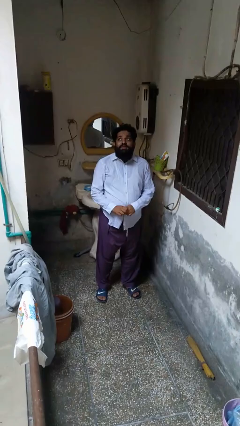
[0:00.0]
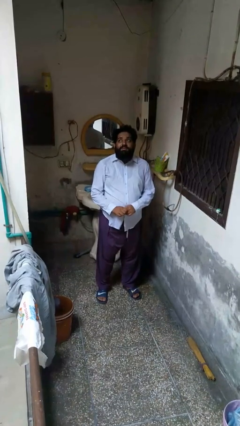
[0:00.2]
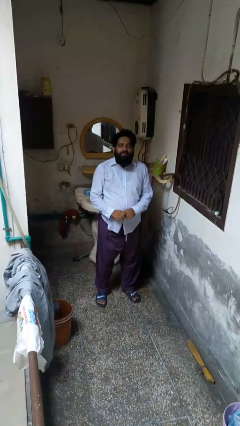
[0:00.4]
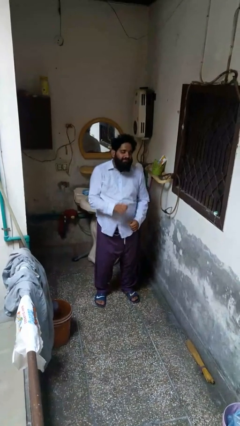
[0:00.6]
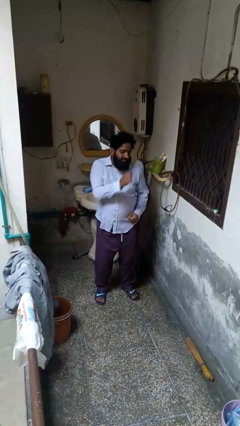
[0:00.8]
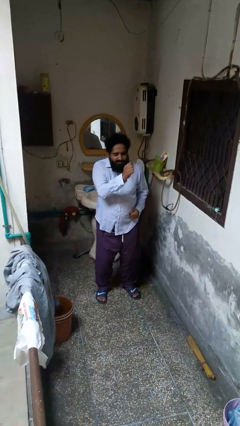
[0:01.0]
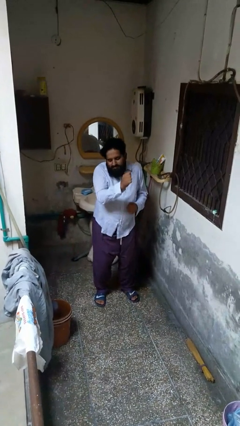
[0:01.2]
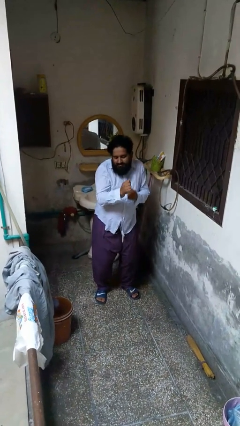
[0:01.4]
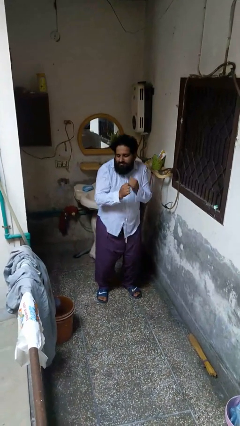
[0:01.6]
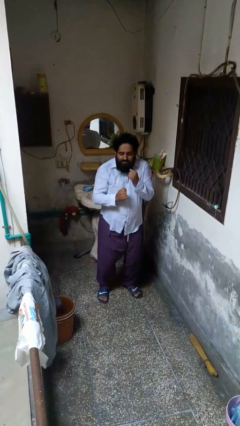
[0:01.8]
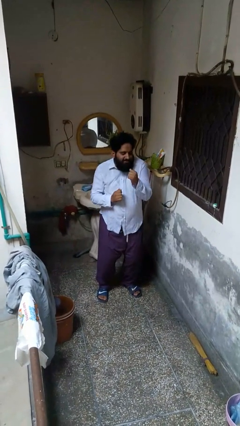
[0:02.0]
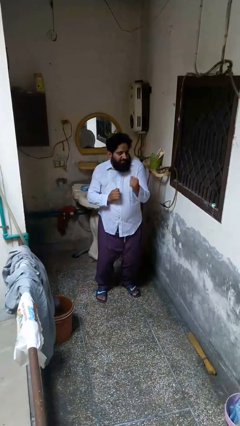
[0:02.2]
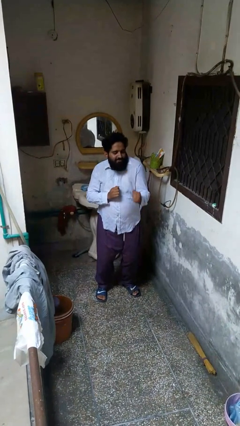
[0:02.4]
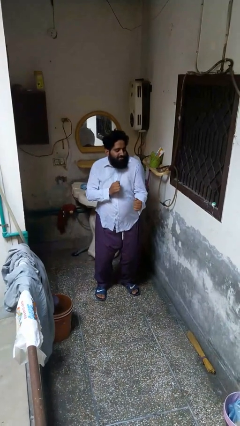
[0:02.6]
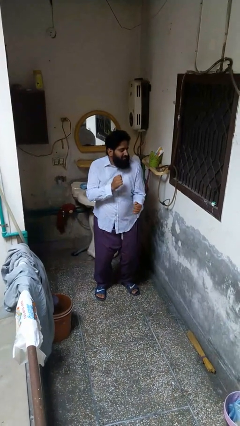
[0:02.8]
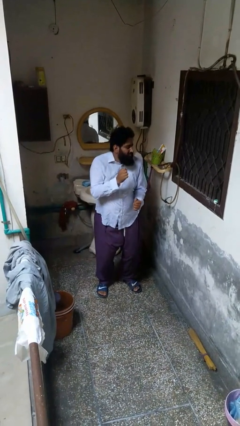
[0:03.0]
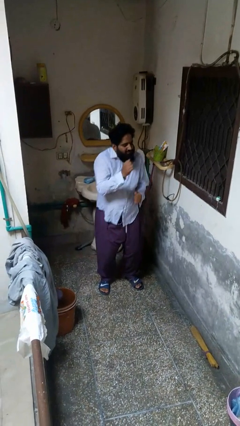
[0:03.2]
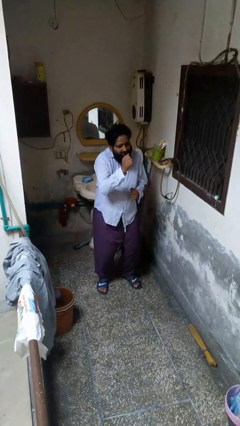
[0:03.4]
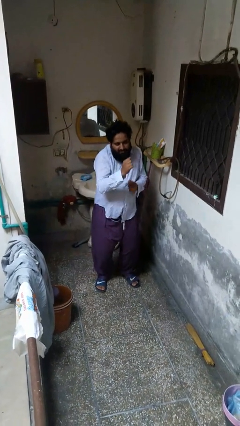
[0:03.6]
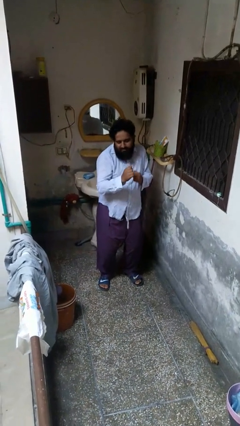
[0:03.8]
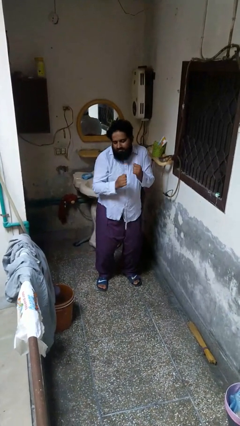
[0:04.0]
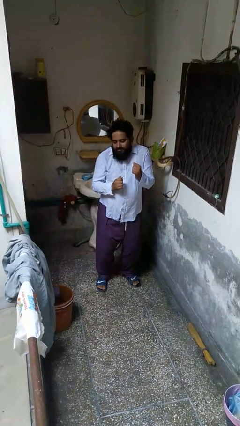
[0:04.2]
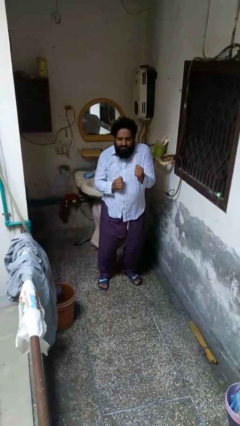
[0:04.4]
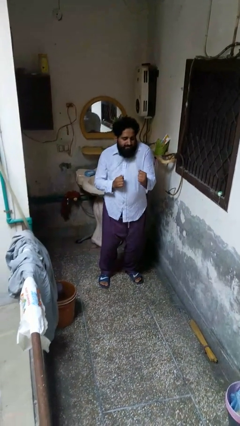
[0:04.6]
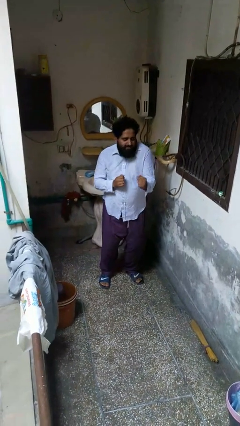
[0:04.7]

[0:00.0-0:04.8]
person dances in place

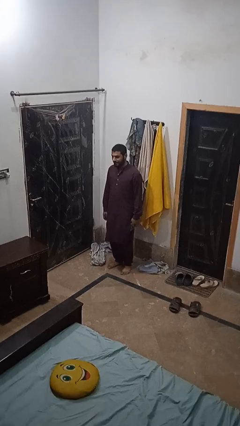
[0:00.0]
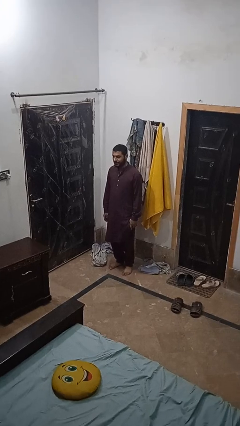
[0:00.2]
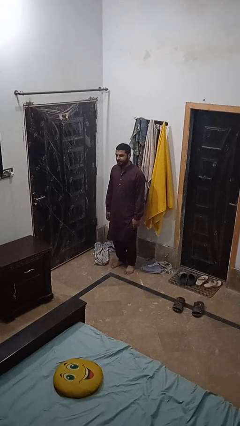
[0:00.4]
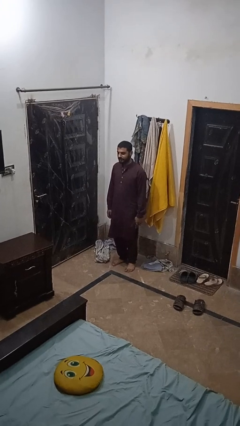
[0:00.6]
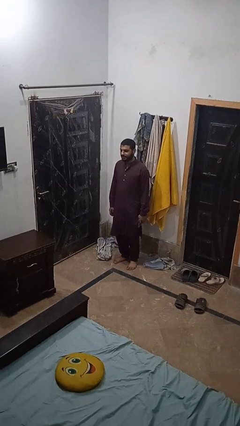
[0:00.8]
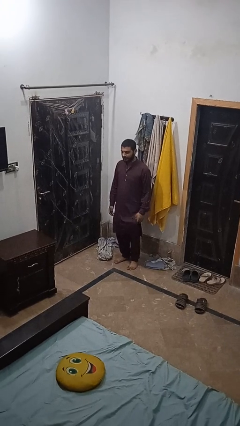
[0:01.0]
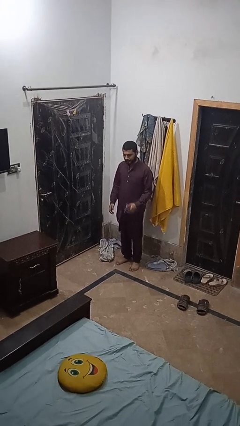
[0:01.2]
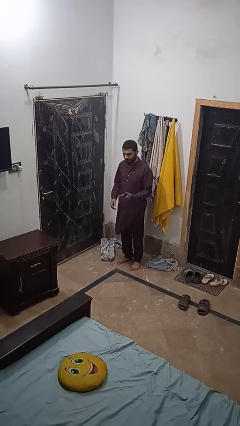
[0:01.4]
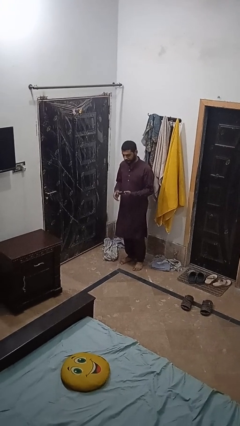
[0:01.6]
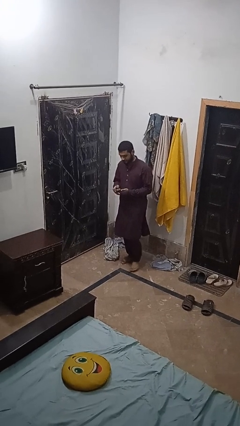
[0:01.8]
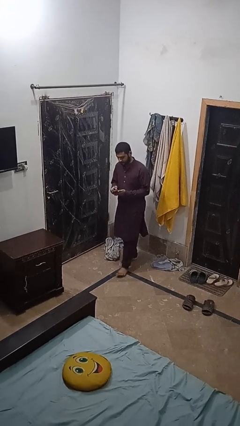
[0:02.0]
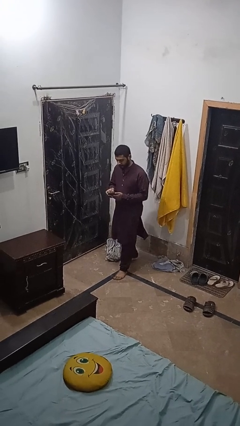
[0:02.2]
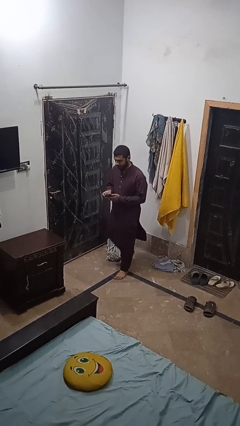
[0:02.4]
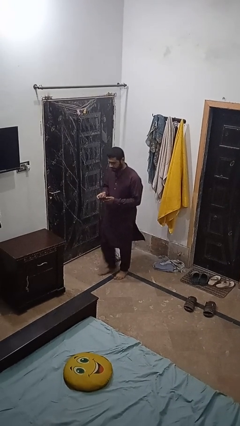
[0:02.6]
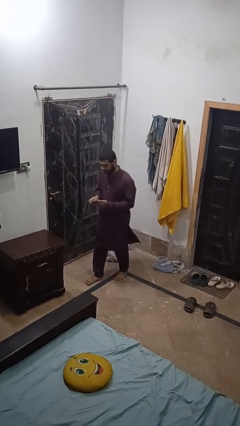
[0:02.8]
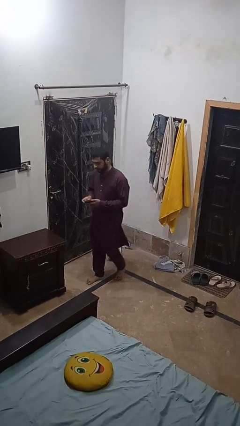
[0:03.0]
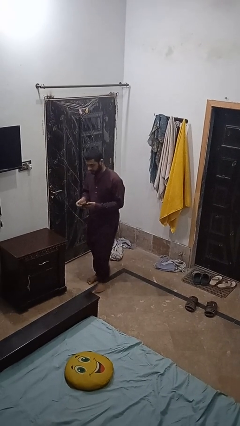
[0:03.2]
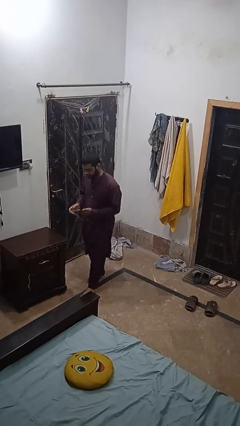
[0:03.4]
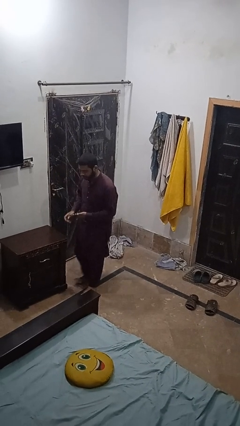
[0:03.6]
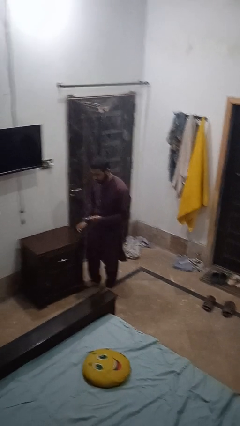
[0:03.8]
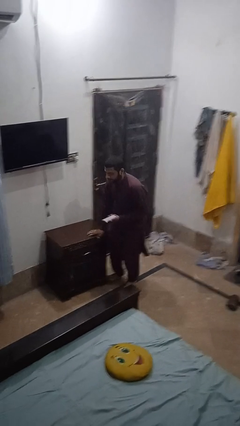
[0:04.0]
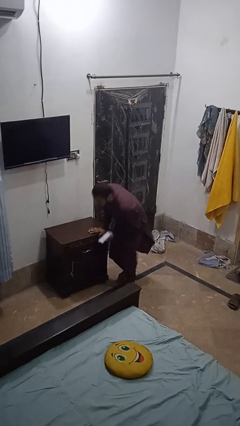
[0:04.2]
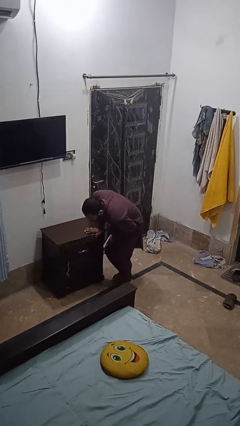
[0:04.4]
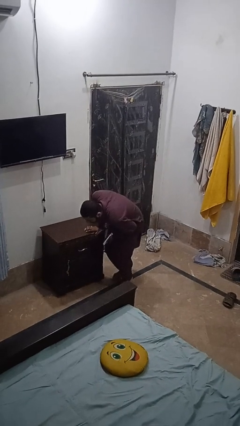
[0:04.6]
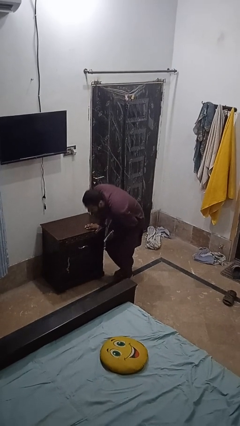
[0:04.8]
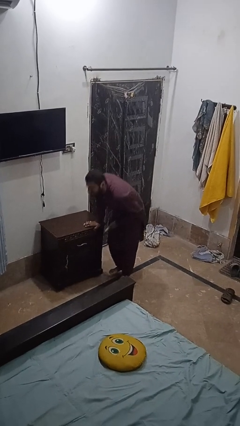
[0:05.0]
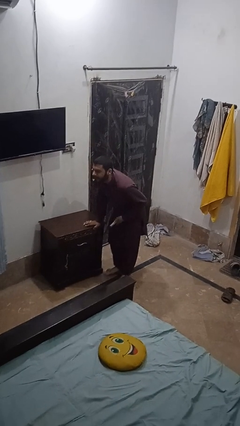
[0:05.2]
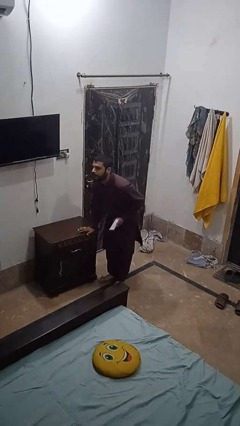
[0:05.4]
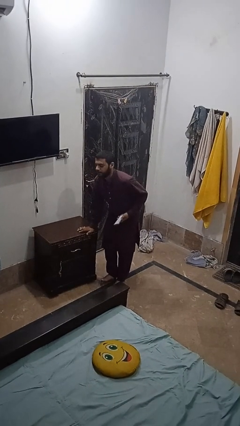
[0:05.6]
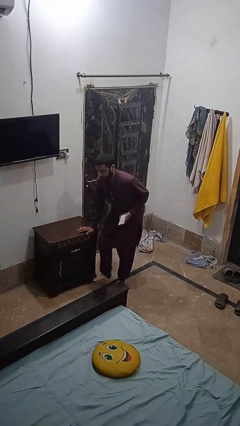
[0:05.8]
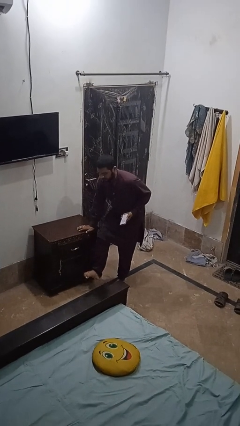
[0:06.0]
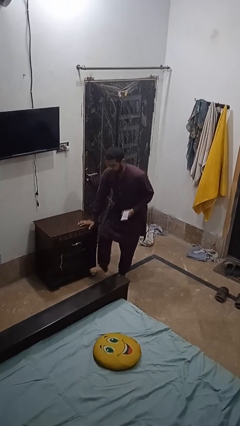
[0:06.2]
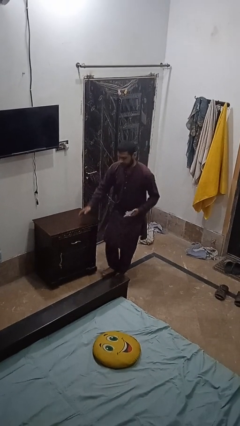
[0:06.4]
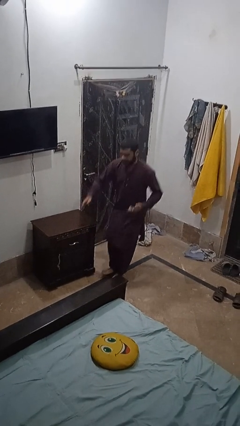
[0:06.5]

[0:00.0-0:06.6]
person stubs toe

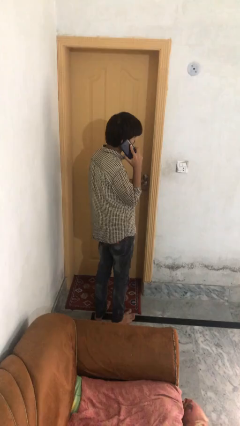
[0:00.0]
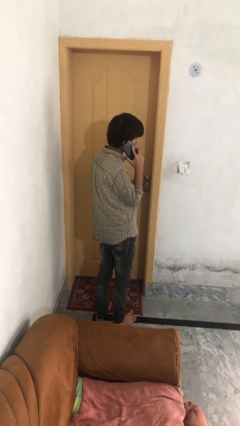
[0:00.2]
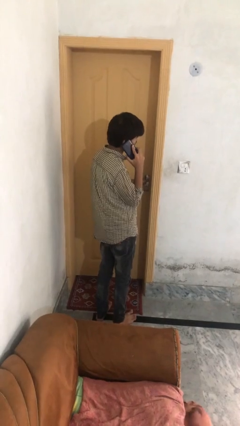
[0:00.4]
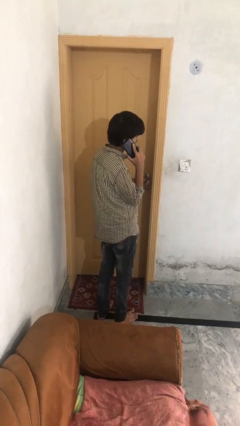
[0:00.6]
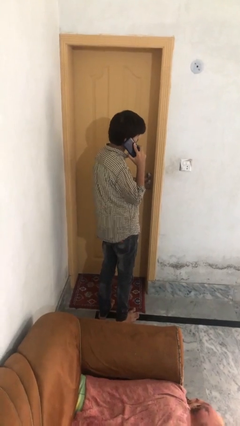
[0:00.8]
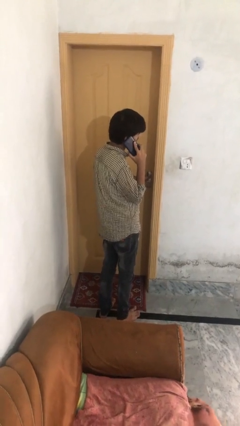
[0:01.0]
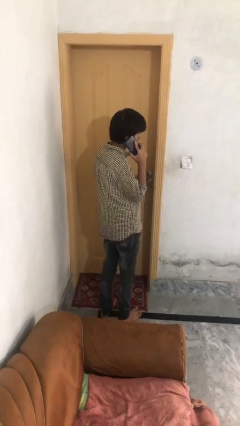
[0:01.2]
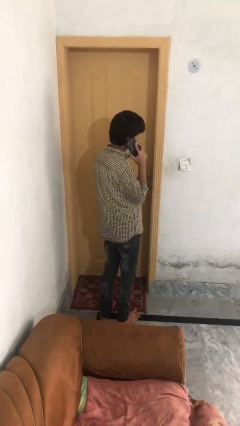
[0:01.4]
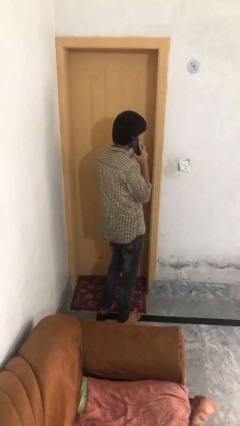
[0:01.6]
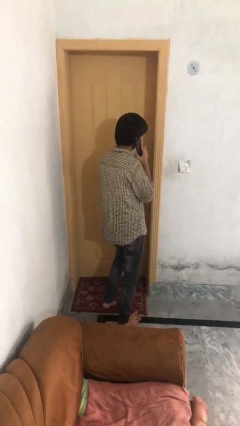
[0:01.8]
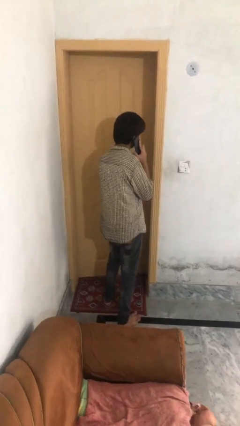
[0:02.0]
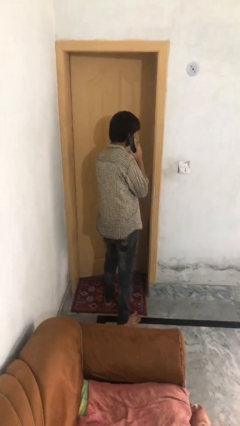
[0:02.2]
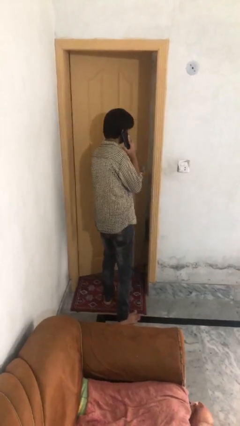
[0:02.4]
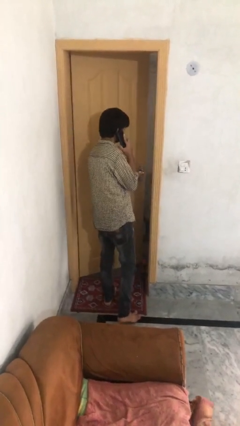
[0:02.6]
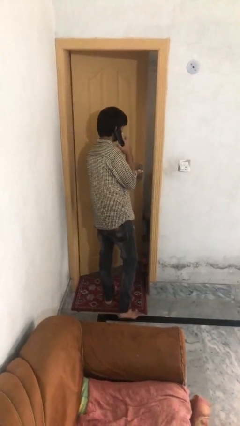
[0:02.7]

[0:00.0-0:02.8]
person opens facility door

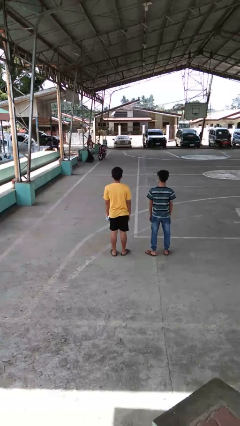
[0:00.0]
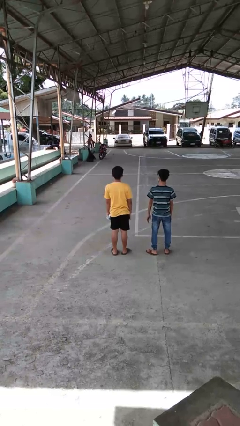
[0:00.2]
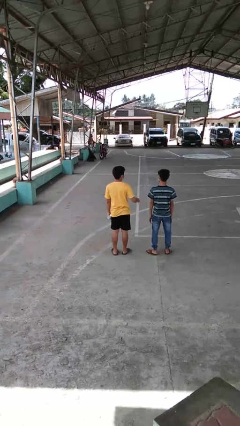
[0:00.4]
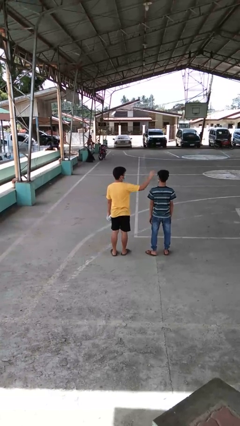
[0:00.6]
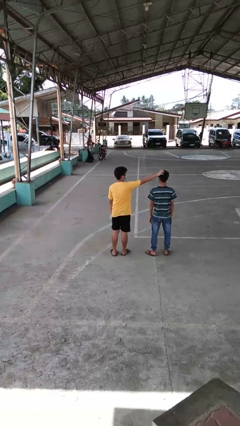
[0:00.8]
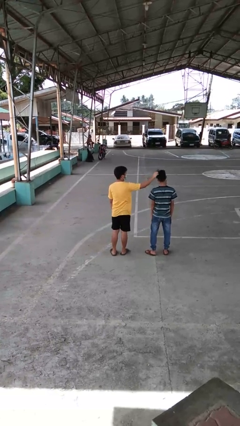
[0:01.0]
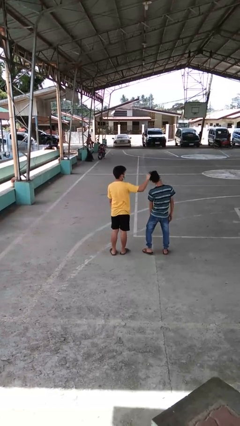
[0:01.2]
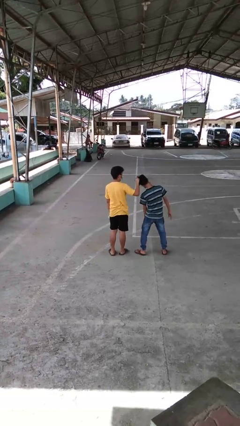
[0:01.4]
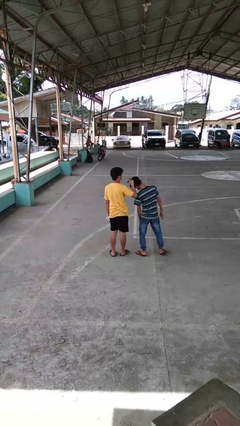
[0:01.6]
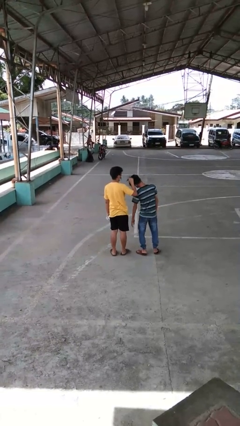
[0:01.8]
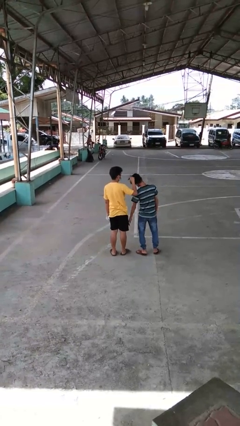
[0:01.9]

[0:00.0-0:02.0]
person grabs person by hair

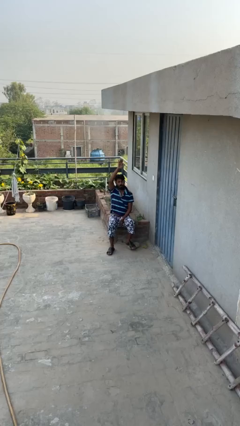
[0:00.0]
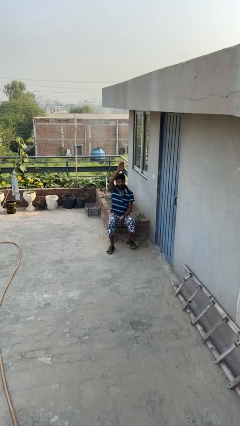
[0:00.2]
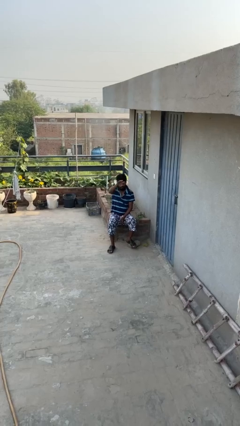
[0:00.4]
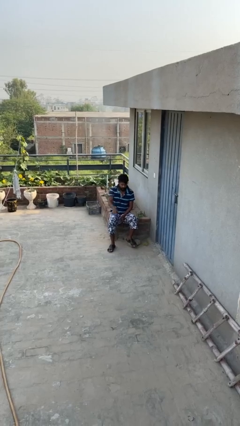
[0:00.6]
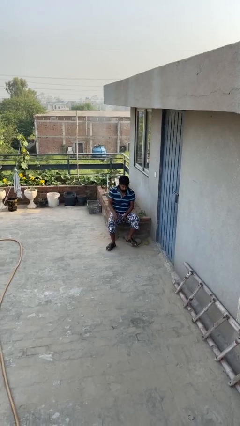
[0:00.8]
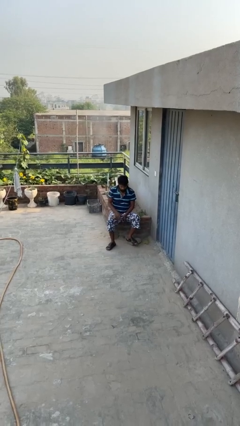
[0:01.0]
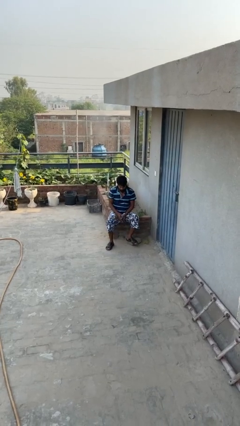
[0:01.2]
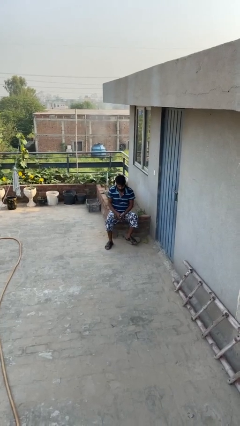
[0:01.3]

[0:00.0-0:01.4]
person gestures lower hand
